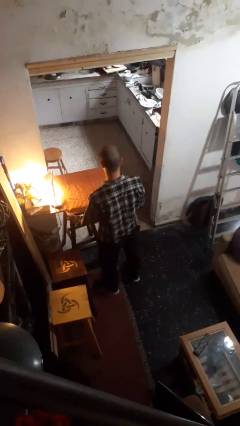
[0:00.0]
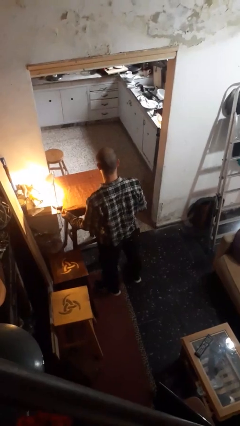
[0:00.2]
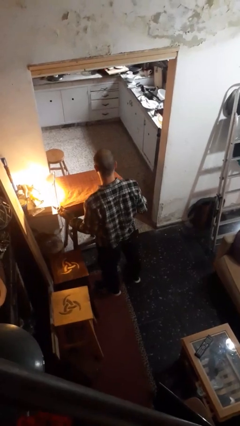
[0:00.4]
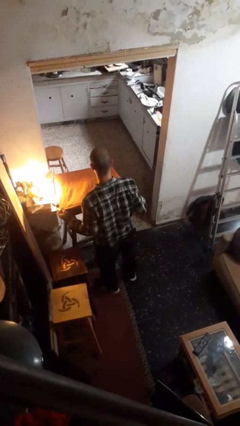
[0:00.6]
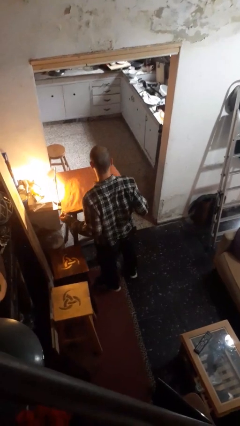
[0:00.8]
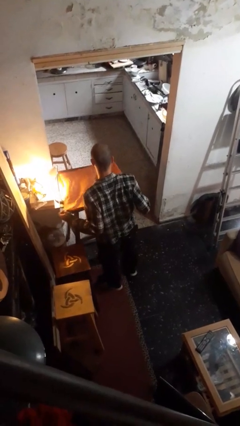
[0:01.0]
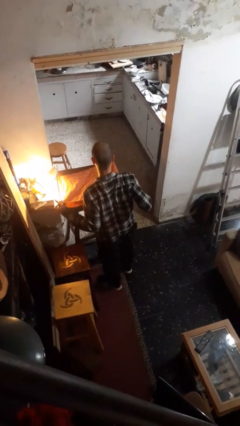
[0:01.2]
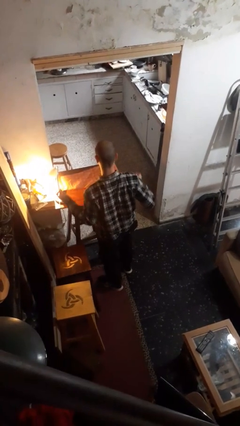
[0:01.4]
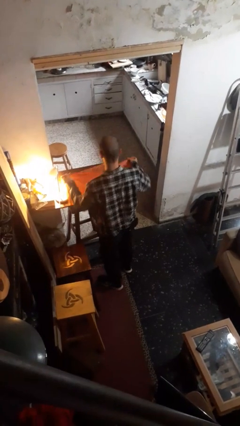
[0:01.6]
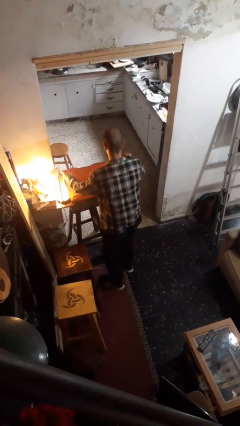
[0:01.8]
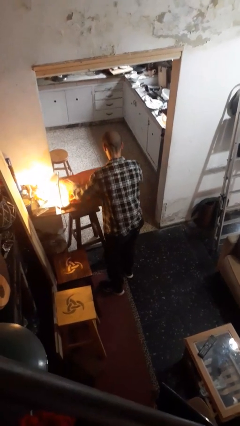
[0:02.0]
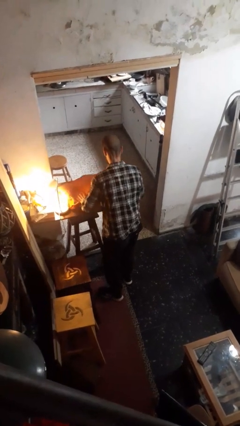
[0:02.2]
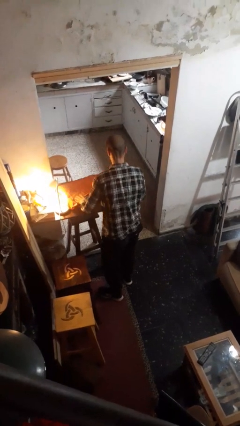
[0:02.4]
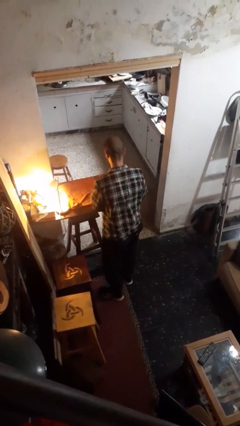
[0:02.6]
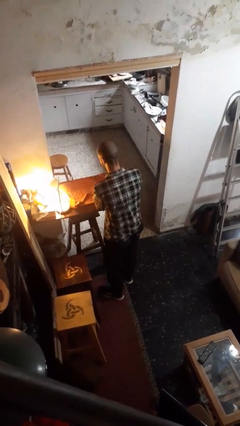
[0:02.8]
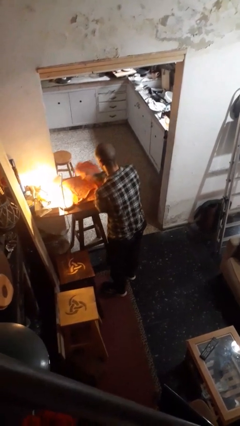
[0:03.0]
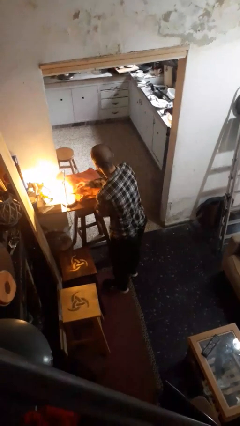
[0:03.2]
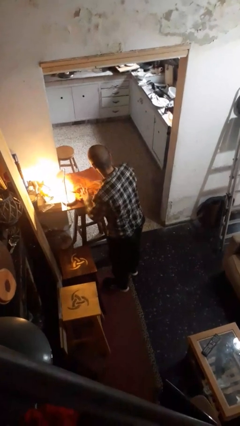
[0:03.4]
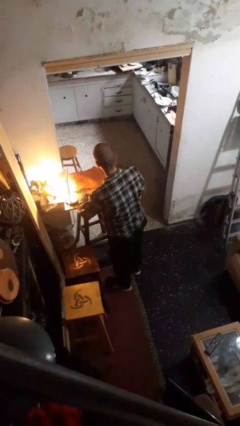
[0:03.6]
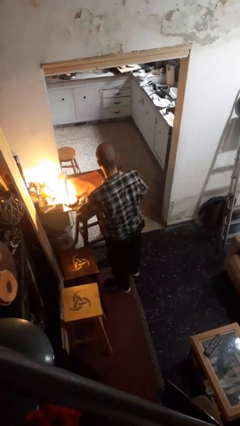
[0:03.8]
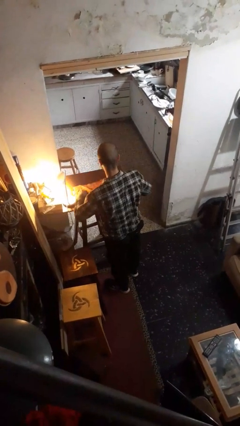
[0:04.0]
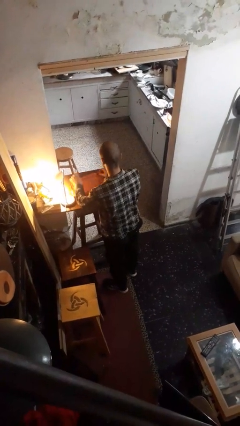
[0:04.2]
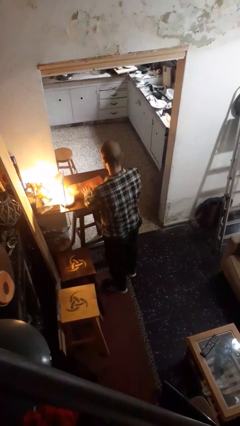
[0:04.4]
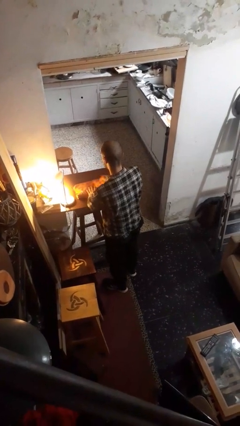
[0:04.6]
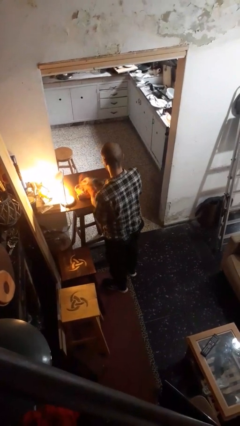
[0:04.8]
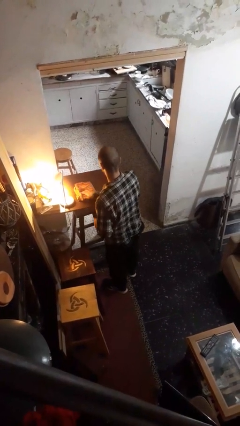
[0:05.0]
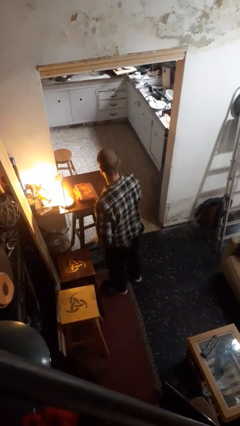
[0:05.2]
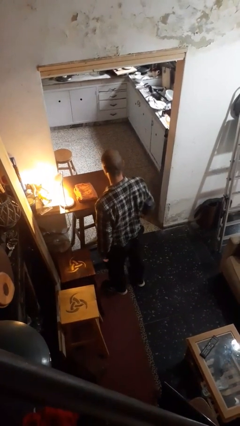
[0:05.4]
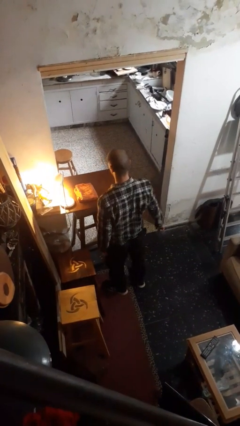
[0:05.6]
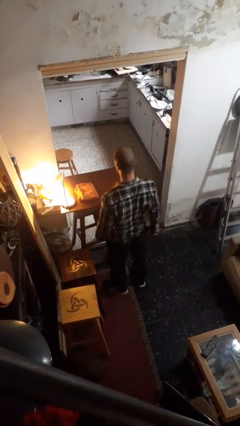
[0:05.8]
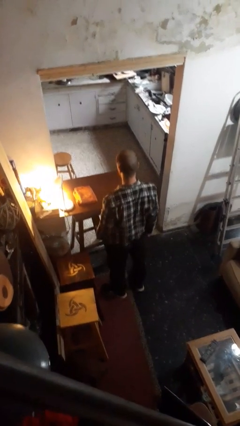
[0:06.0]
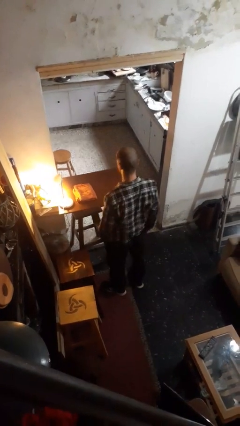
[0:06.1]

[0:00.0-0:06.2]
person folds tablecloth

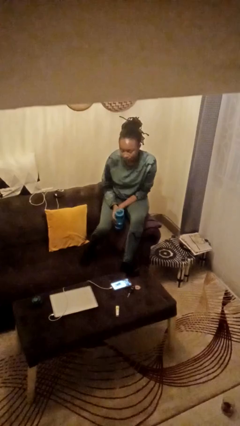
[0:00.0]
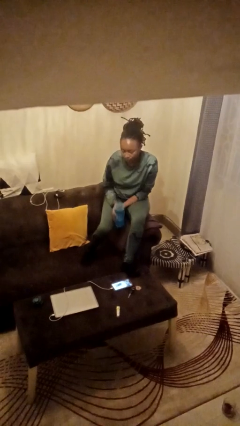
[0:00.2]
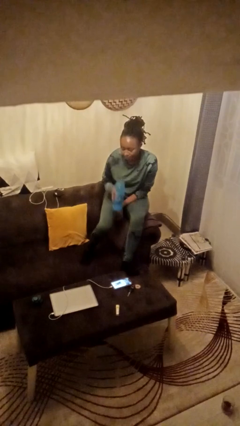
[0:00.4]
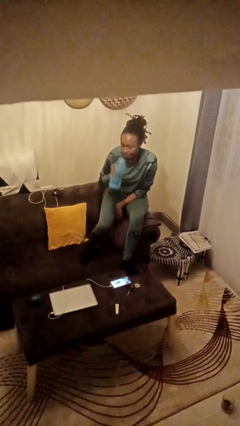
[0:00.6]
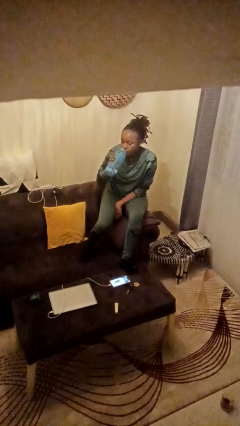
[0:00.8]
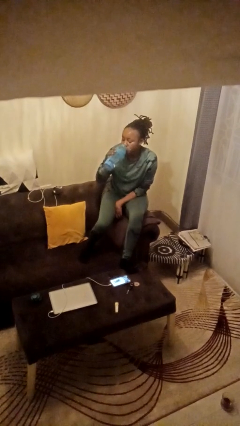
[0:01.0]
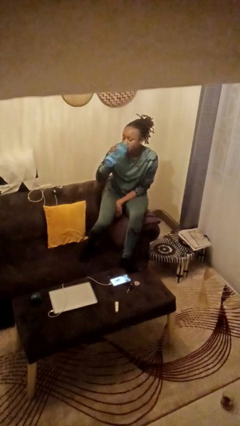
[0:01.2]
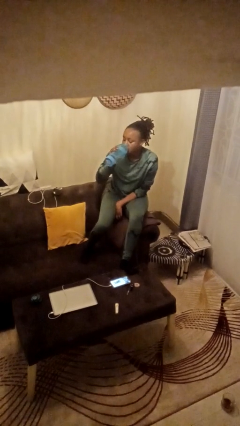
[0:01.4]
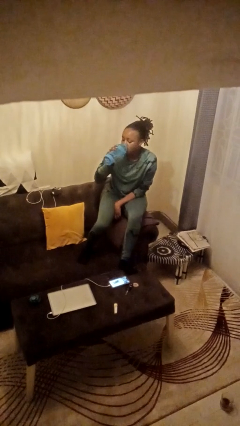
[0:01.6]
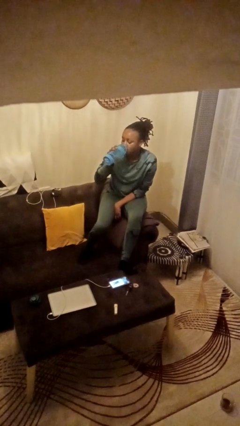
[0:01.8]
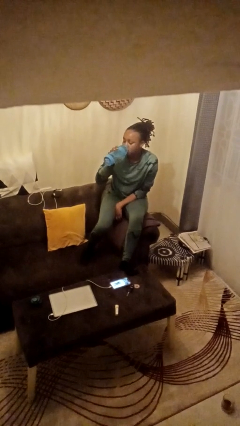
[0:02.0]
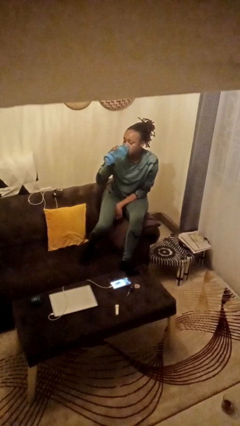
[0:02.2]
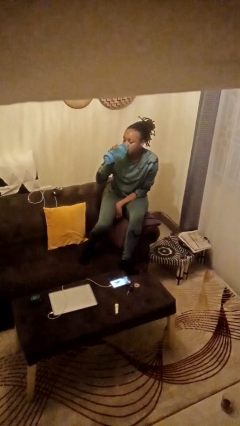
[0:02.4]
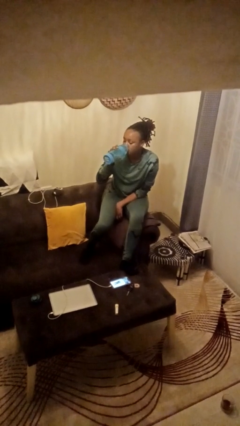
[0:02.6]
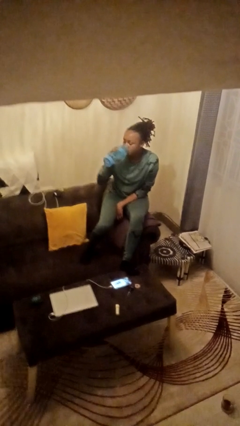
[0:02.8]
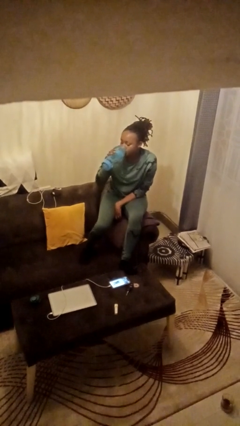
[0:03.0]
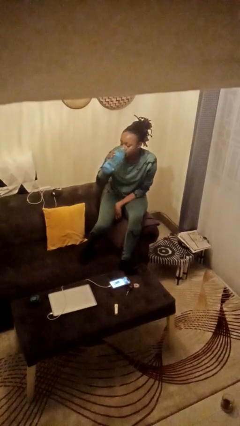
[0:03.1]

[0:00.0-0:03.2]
person drinks from bottle

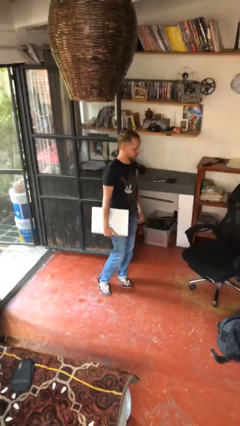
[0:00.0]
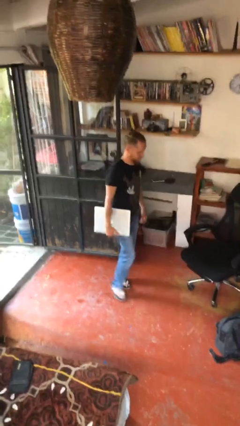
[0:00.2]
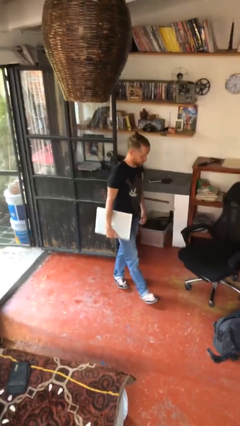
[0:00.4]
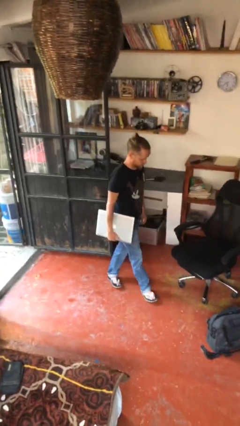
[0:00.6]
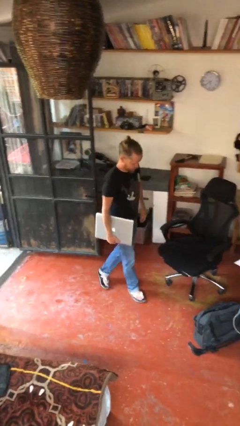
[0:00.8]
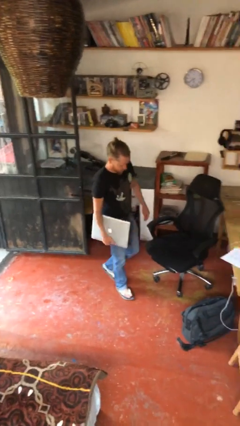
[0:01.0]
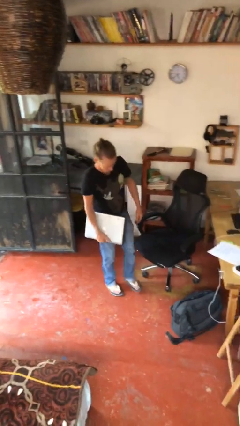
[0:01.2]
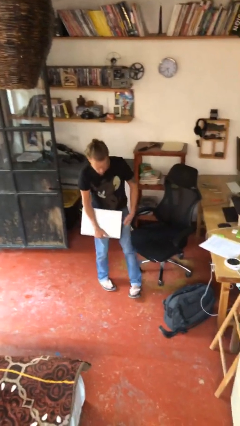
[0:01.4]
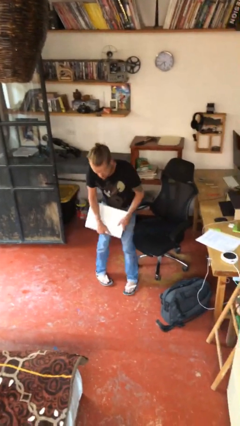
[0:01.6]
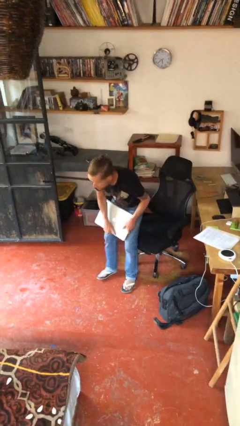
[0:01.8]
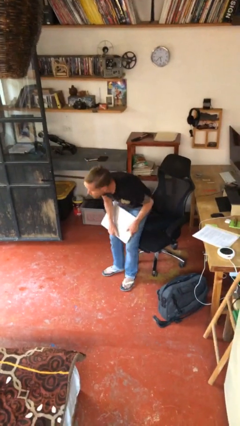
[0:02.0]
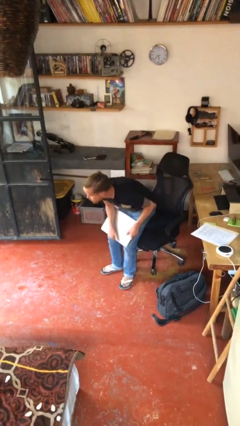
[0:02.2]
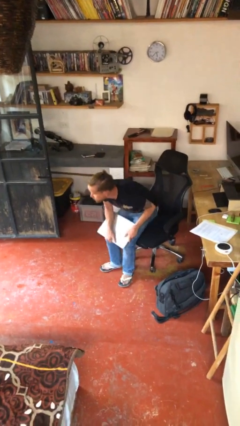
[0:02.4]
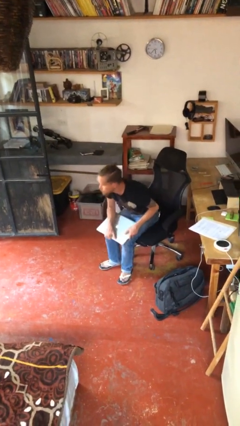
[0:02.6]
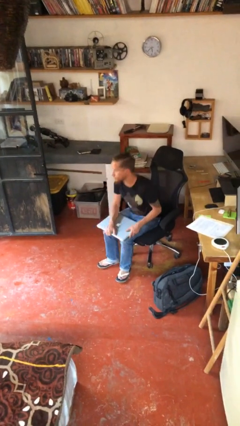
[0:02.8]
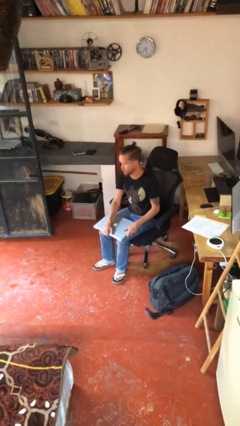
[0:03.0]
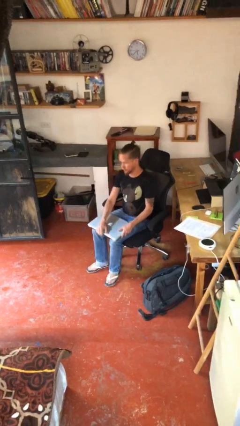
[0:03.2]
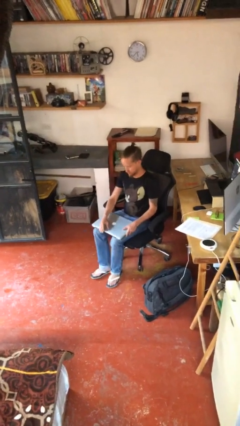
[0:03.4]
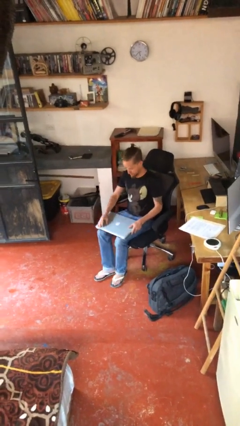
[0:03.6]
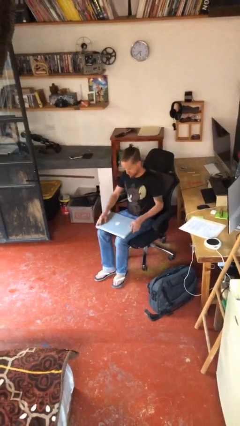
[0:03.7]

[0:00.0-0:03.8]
person sits down

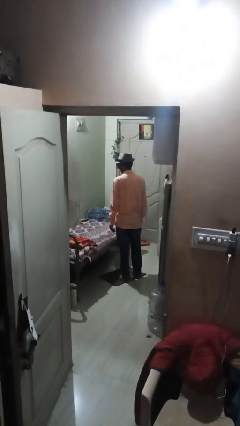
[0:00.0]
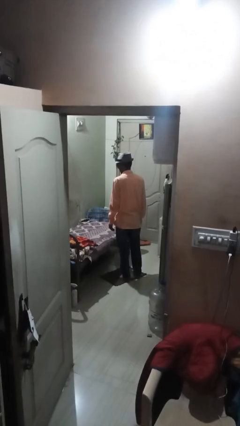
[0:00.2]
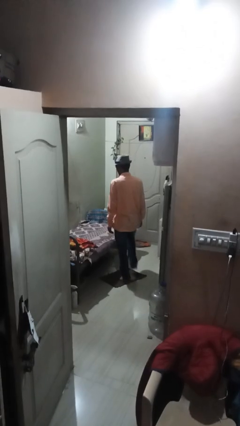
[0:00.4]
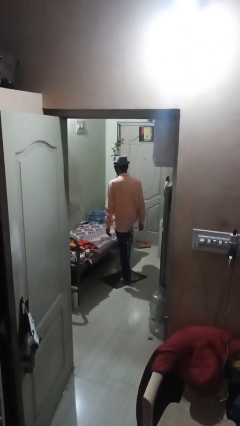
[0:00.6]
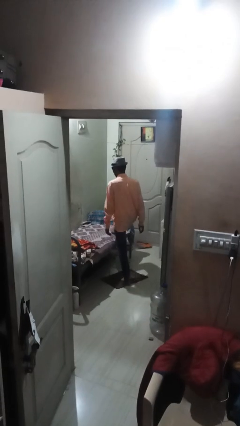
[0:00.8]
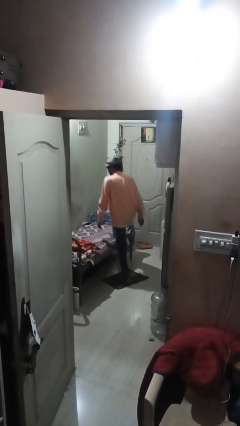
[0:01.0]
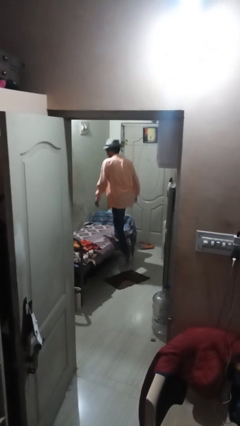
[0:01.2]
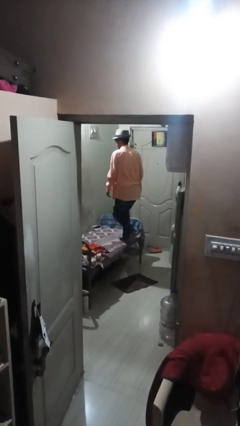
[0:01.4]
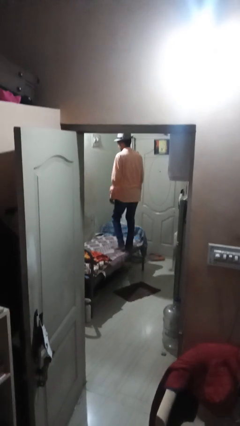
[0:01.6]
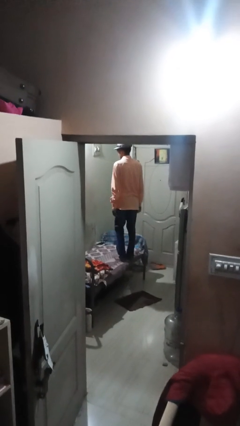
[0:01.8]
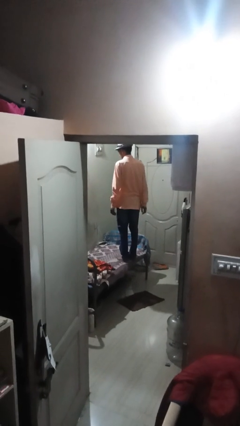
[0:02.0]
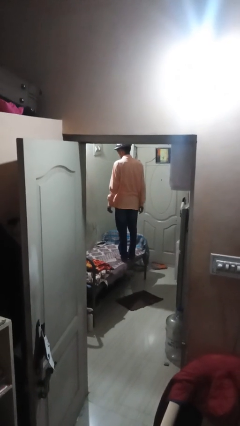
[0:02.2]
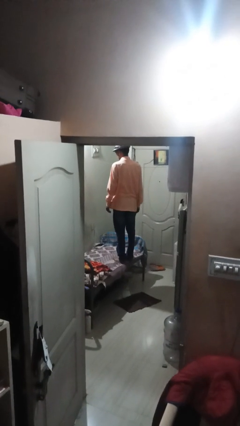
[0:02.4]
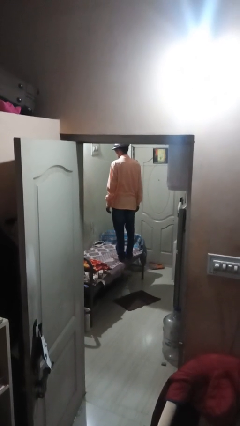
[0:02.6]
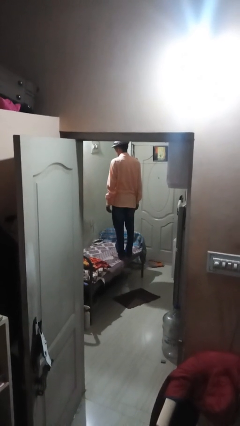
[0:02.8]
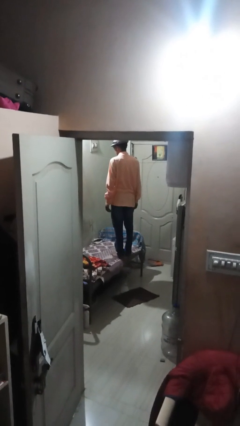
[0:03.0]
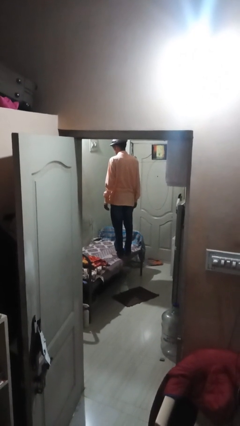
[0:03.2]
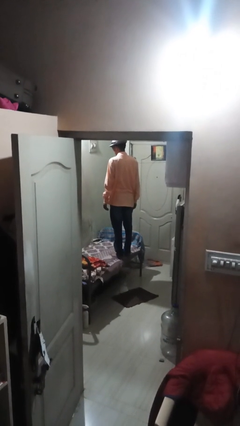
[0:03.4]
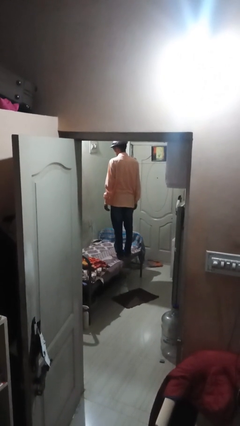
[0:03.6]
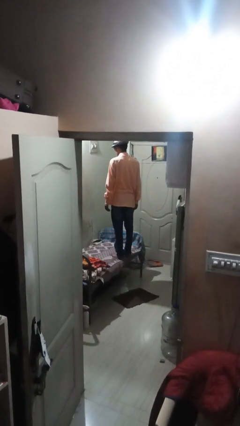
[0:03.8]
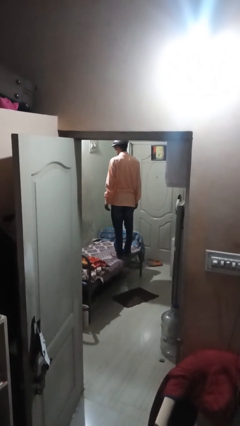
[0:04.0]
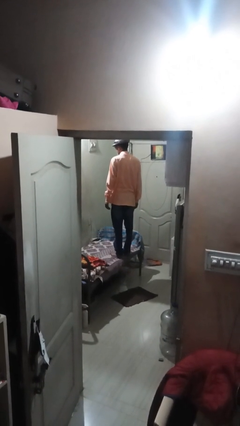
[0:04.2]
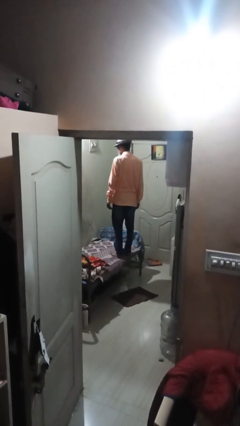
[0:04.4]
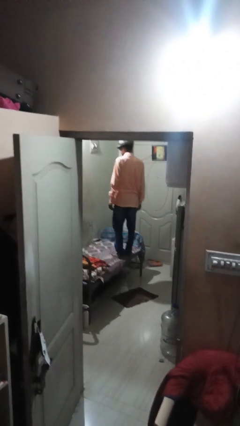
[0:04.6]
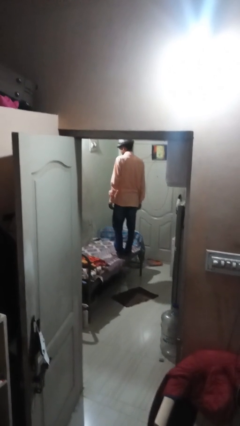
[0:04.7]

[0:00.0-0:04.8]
person climbs on couch
